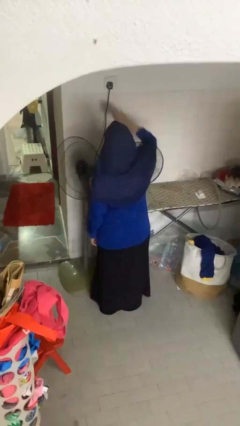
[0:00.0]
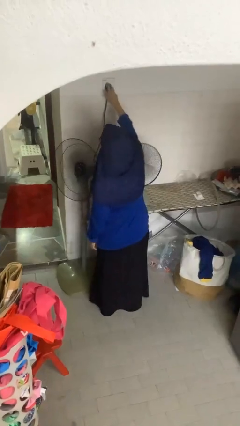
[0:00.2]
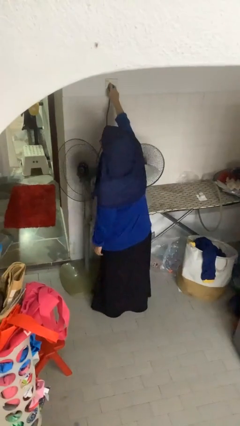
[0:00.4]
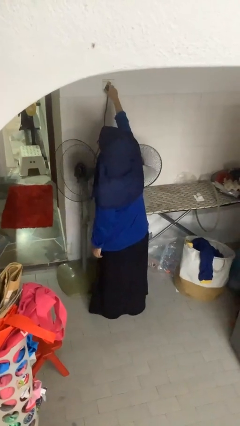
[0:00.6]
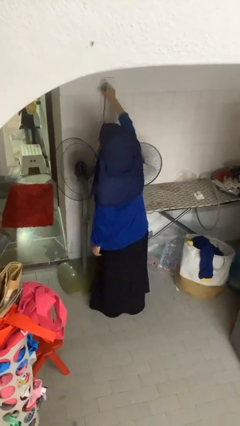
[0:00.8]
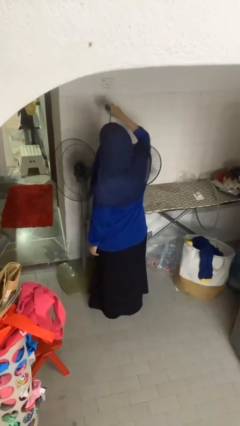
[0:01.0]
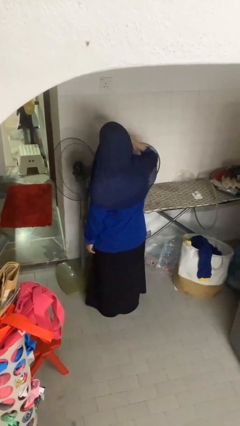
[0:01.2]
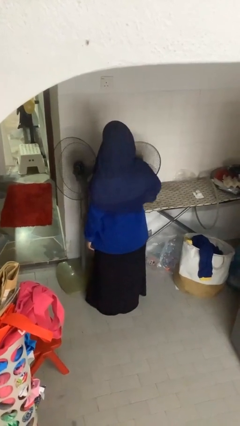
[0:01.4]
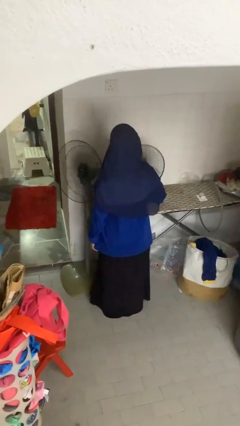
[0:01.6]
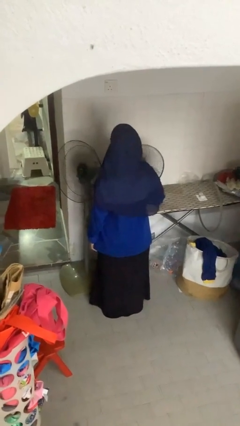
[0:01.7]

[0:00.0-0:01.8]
person unplugs from electrical socket

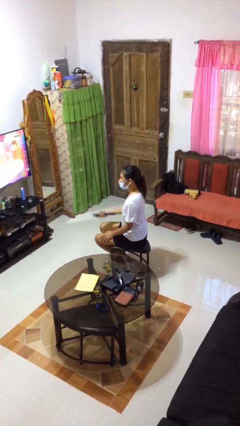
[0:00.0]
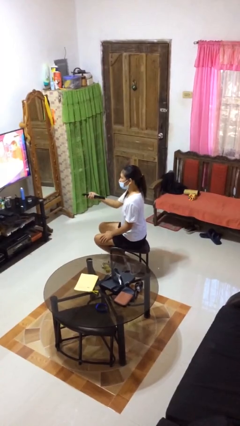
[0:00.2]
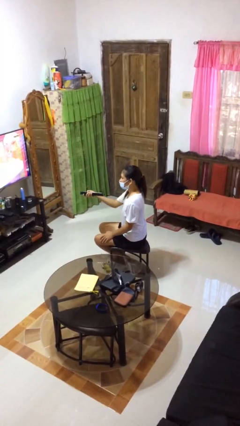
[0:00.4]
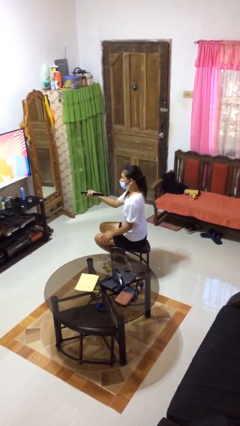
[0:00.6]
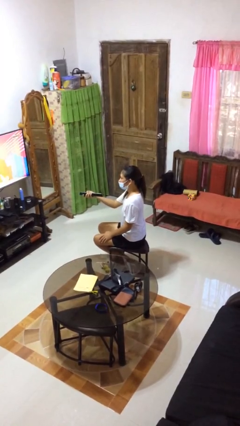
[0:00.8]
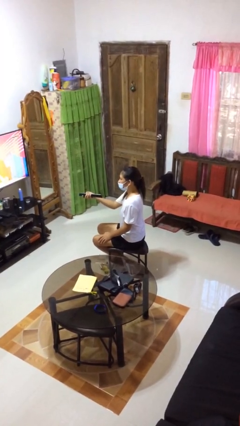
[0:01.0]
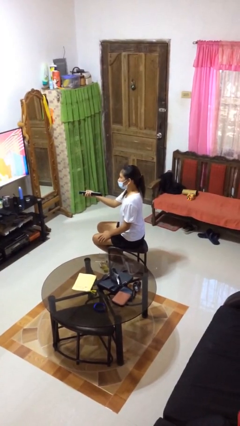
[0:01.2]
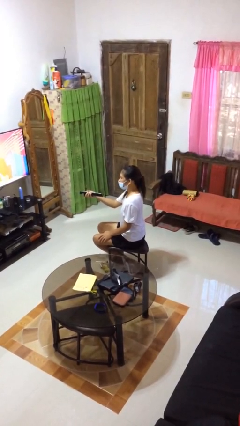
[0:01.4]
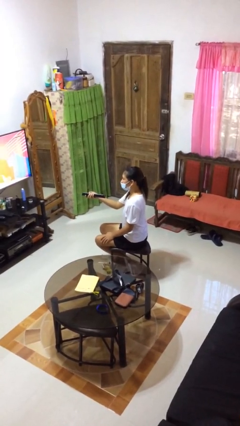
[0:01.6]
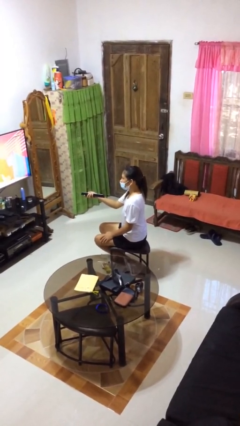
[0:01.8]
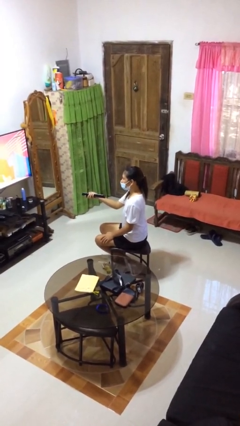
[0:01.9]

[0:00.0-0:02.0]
person uses television remote

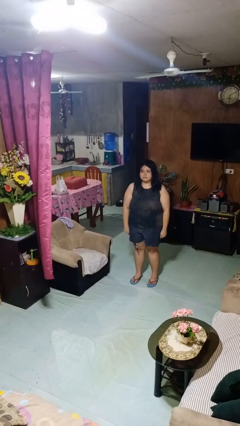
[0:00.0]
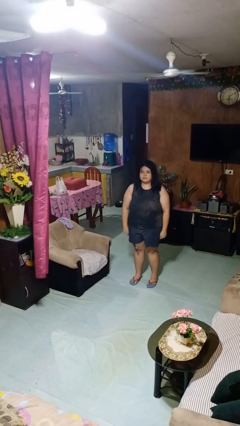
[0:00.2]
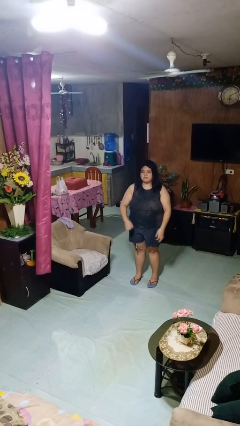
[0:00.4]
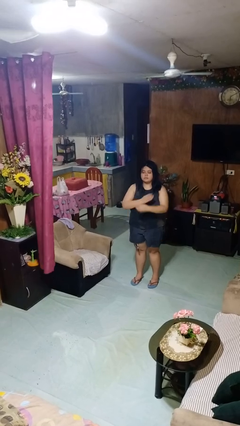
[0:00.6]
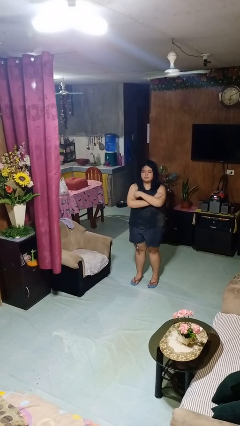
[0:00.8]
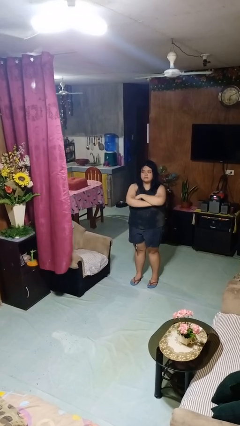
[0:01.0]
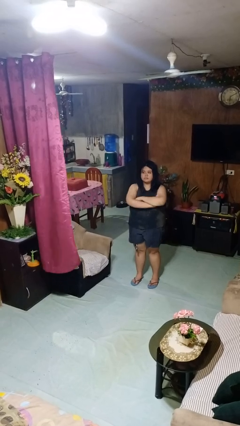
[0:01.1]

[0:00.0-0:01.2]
person crosses arms

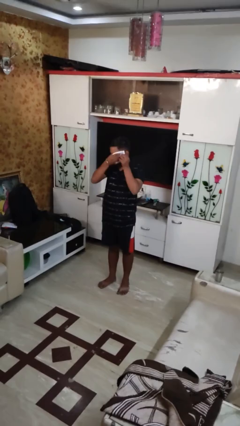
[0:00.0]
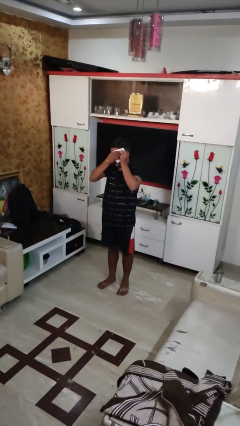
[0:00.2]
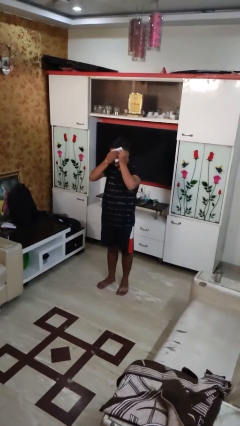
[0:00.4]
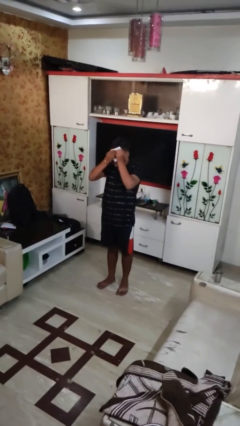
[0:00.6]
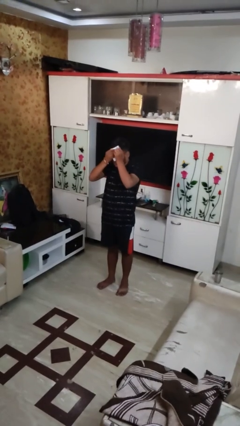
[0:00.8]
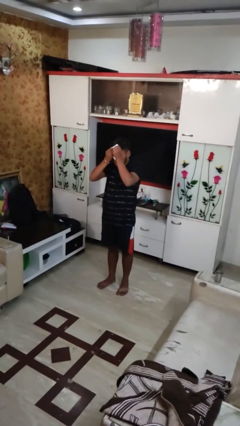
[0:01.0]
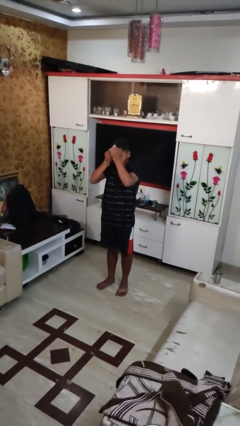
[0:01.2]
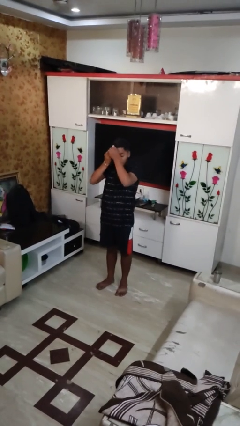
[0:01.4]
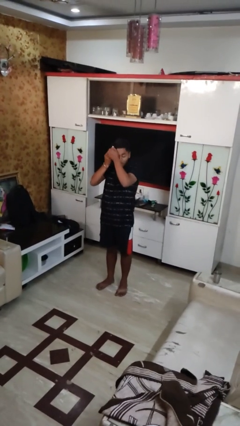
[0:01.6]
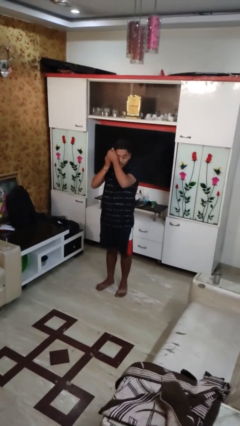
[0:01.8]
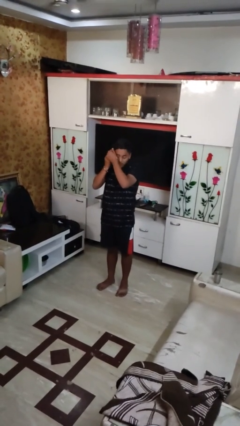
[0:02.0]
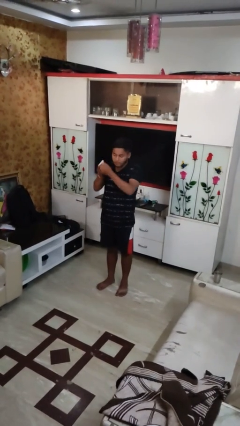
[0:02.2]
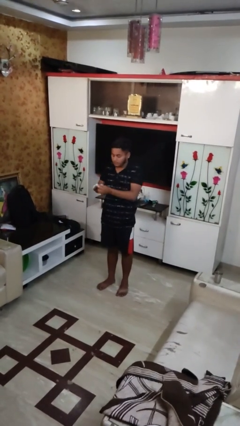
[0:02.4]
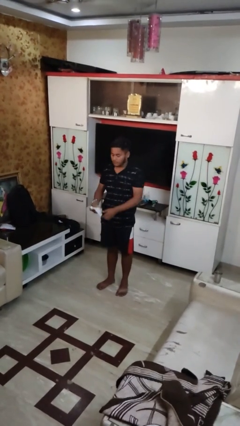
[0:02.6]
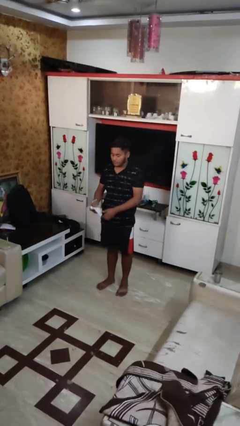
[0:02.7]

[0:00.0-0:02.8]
person wipes mouth with napkin

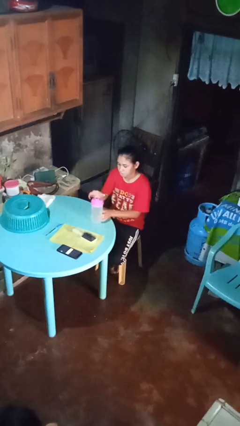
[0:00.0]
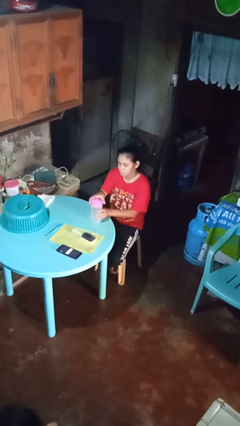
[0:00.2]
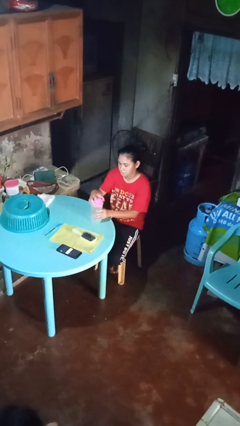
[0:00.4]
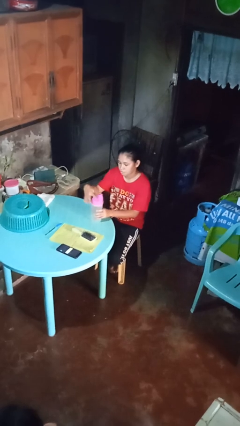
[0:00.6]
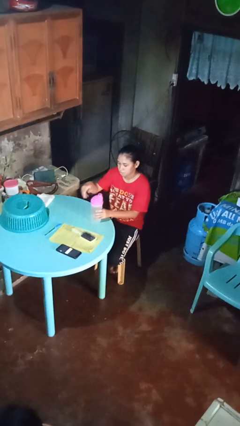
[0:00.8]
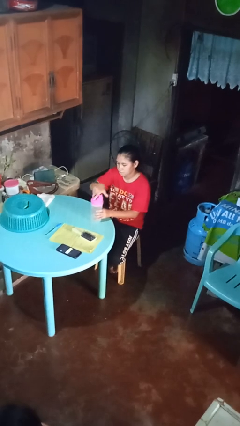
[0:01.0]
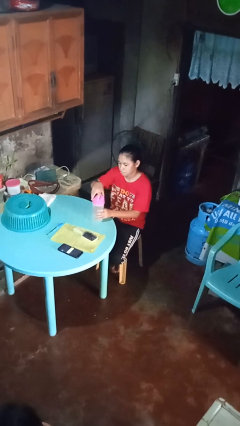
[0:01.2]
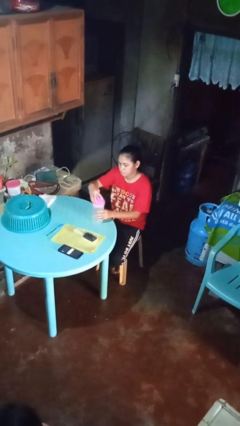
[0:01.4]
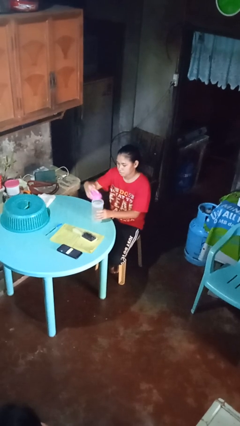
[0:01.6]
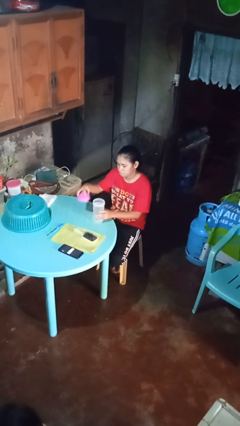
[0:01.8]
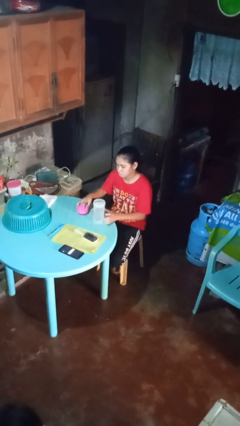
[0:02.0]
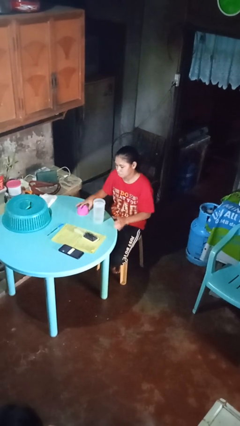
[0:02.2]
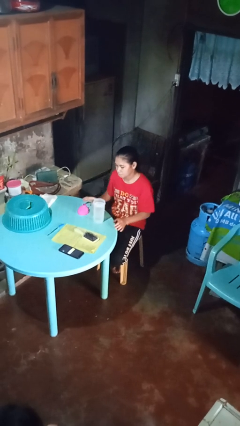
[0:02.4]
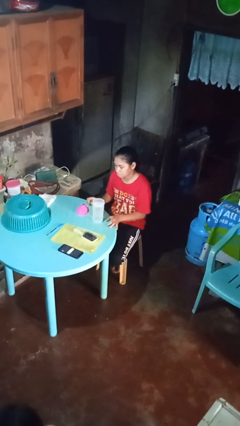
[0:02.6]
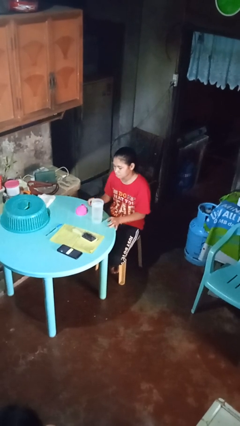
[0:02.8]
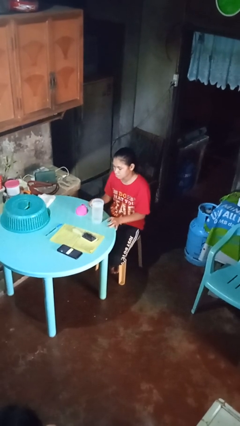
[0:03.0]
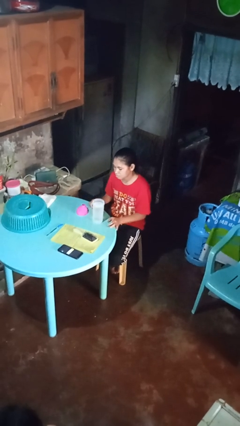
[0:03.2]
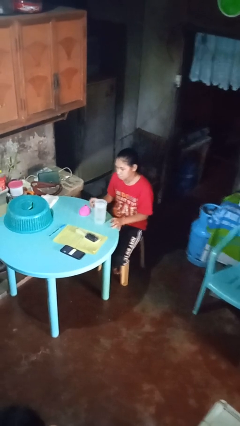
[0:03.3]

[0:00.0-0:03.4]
person unscrews lid from bottle

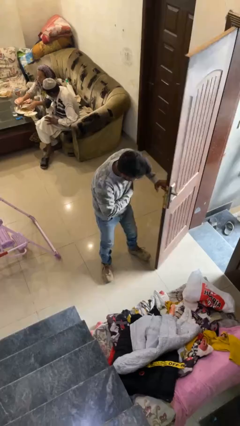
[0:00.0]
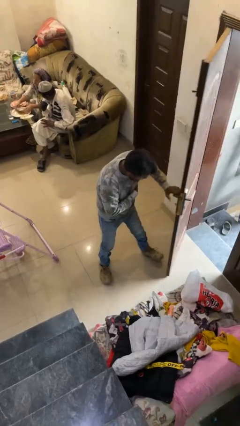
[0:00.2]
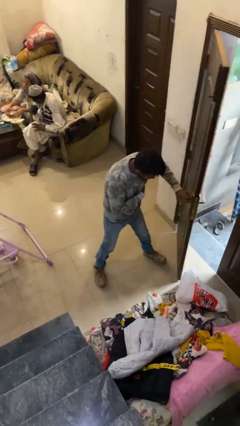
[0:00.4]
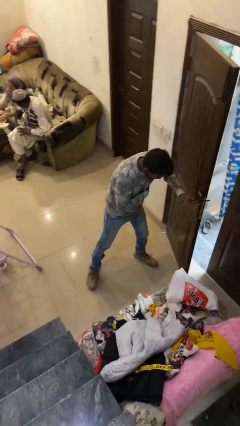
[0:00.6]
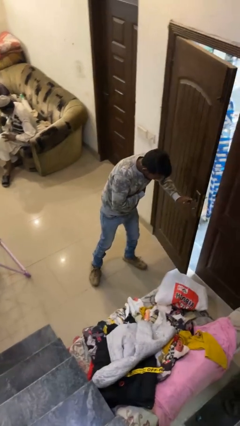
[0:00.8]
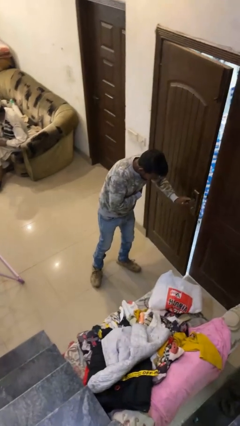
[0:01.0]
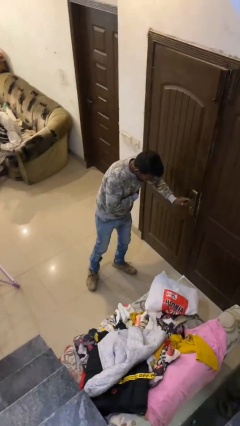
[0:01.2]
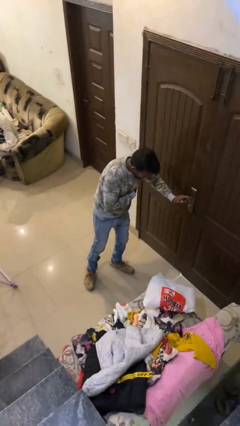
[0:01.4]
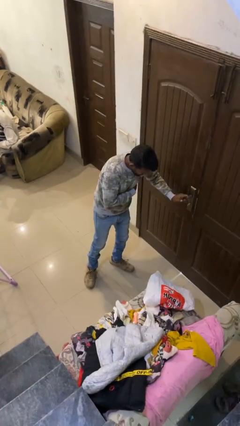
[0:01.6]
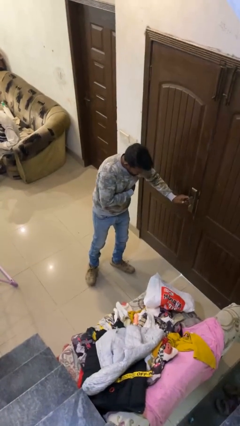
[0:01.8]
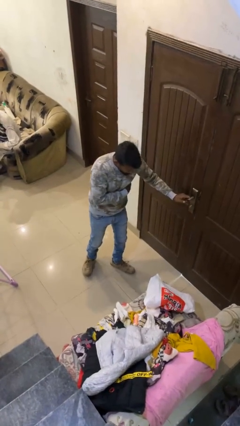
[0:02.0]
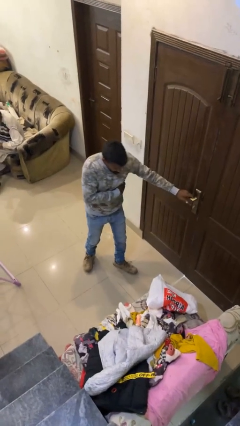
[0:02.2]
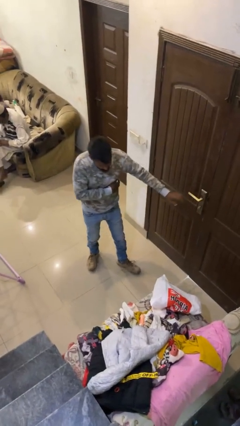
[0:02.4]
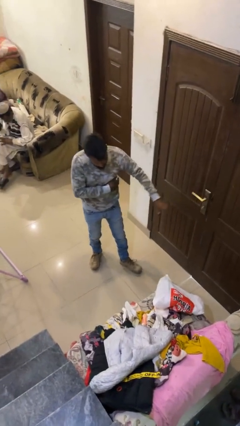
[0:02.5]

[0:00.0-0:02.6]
person closes facility door

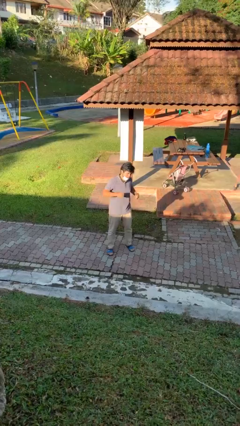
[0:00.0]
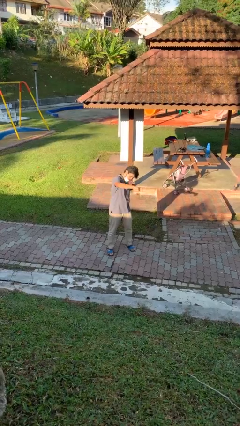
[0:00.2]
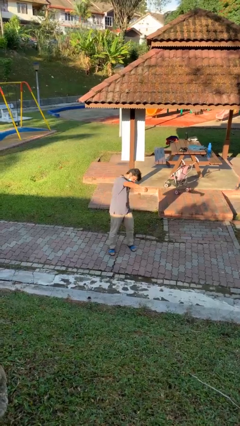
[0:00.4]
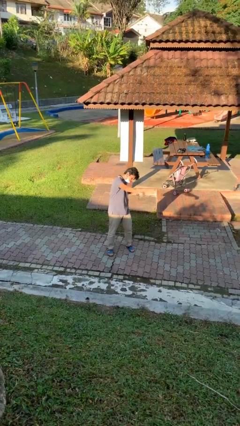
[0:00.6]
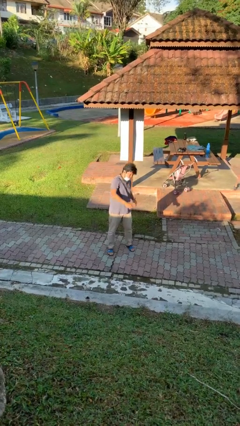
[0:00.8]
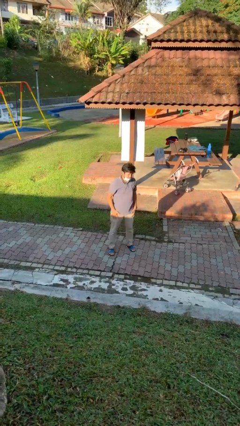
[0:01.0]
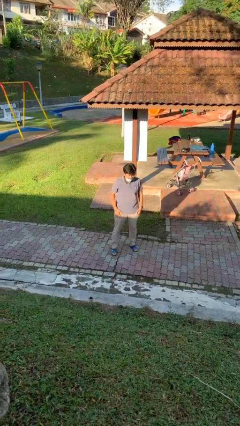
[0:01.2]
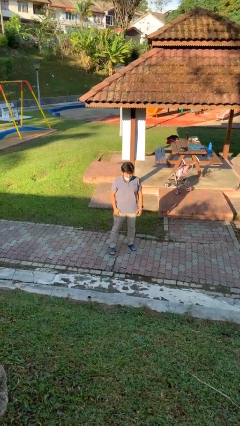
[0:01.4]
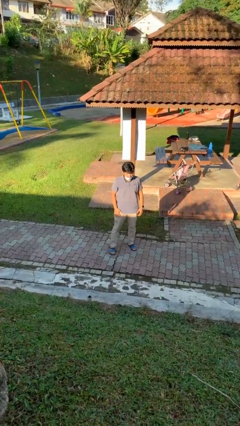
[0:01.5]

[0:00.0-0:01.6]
person punches

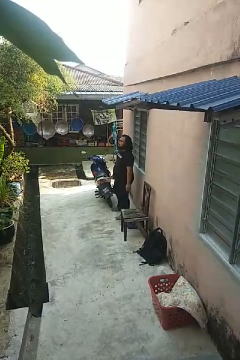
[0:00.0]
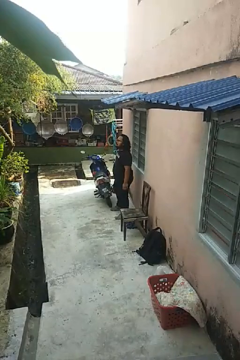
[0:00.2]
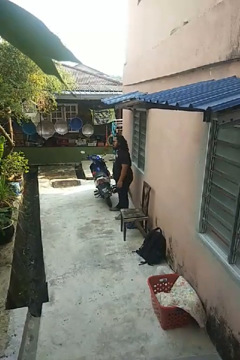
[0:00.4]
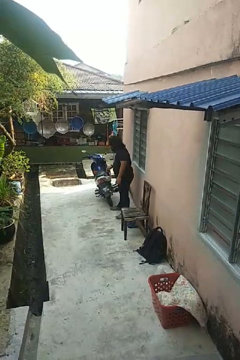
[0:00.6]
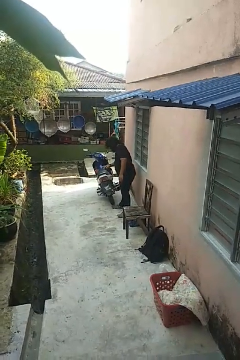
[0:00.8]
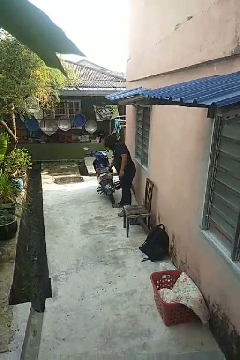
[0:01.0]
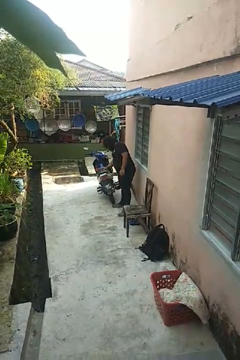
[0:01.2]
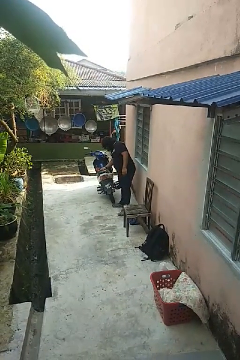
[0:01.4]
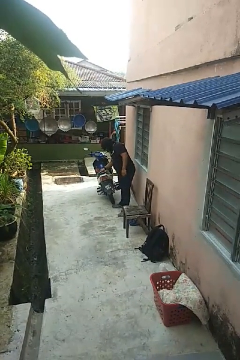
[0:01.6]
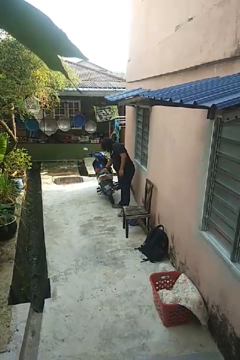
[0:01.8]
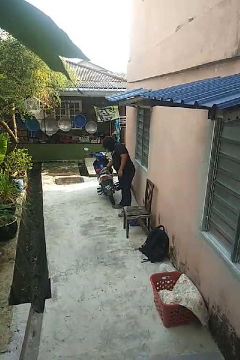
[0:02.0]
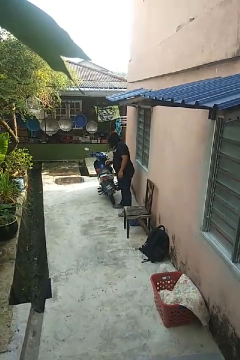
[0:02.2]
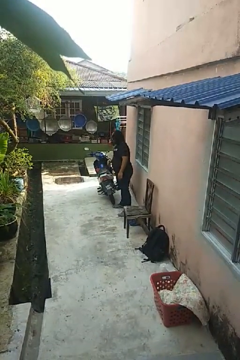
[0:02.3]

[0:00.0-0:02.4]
person taps object with finger
